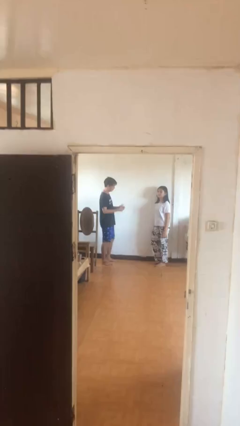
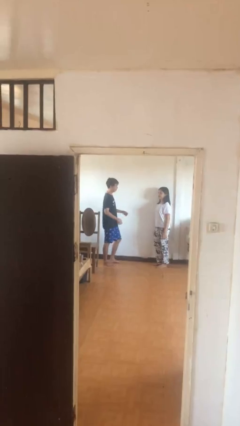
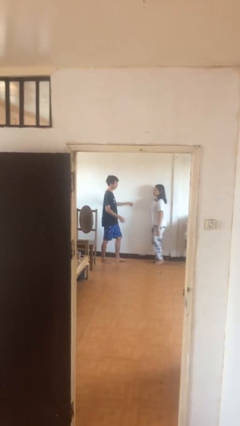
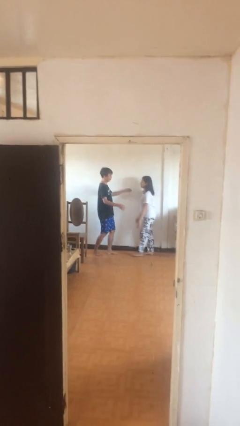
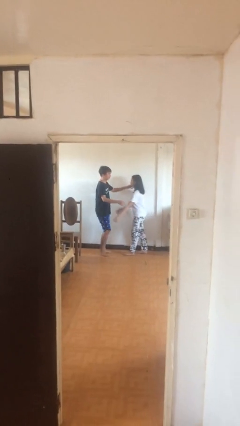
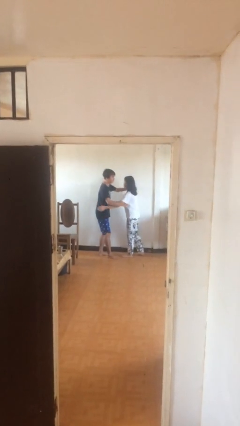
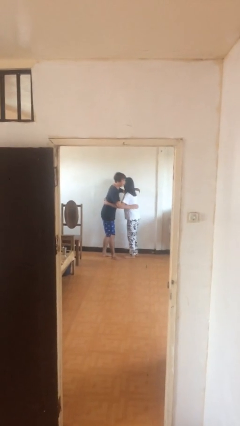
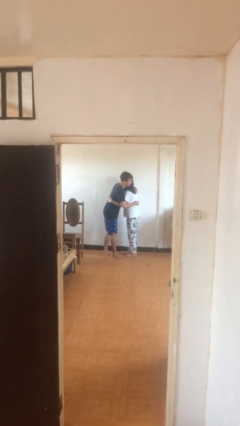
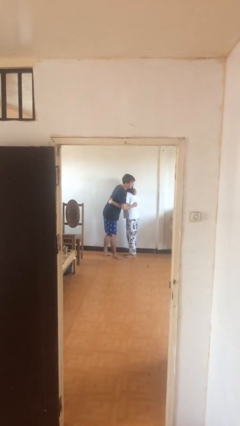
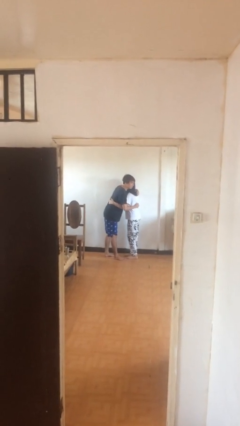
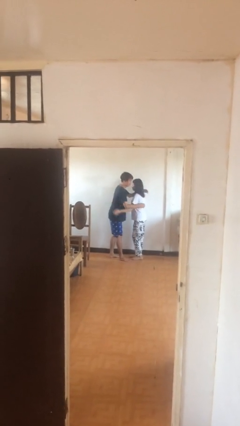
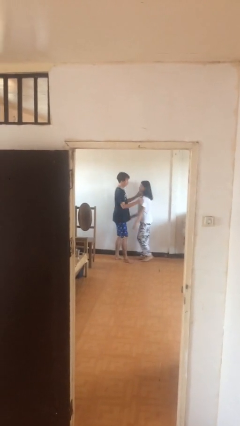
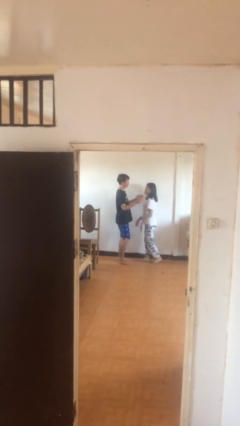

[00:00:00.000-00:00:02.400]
person embraces person

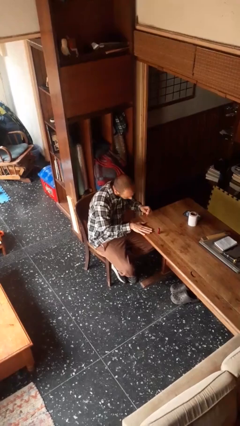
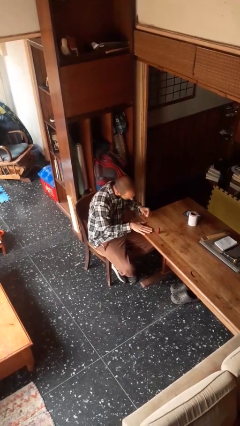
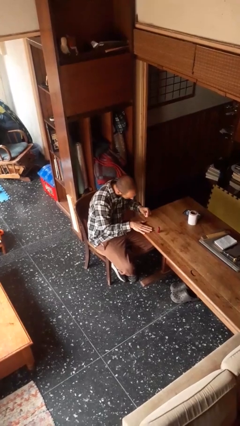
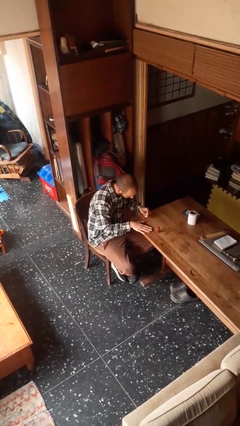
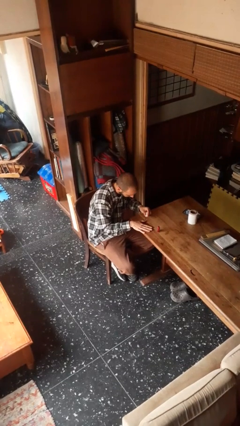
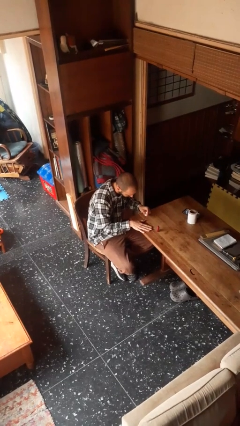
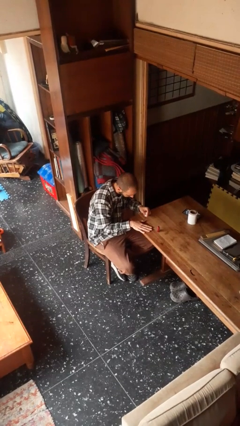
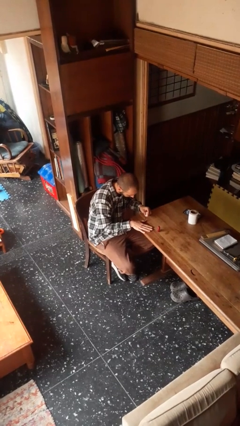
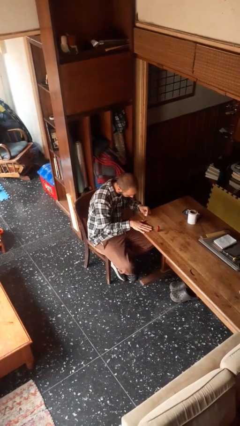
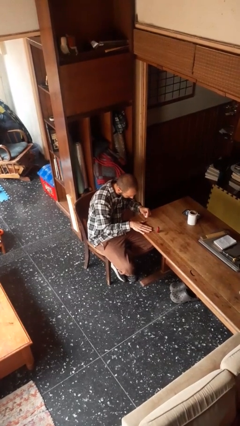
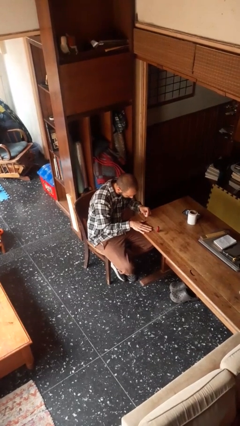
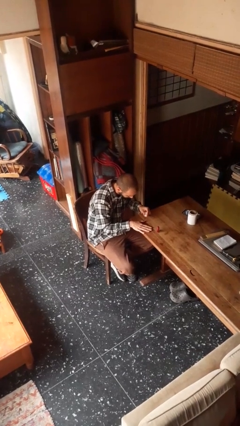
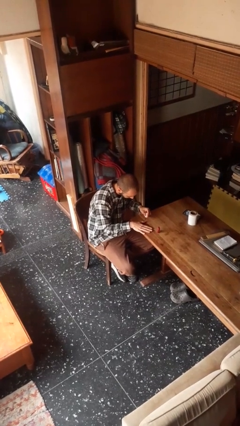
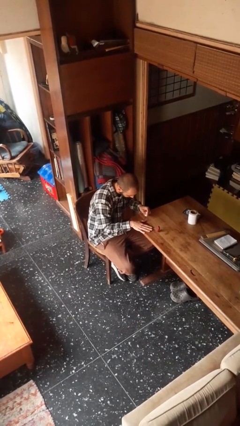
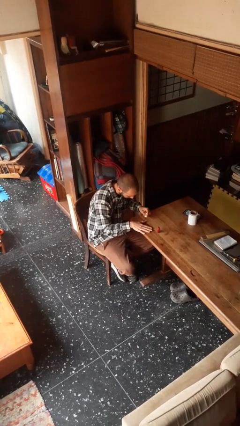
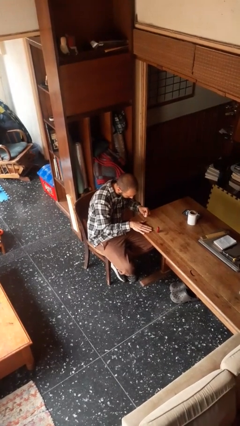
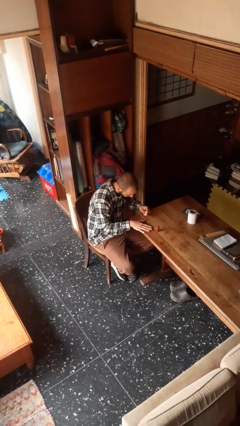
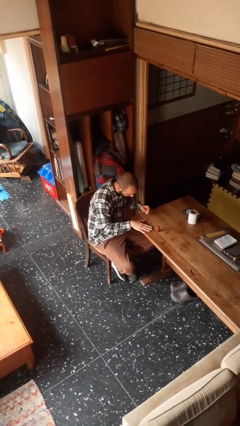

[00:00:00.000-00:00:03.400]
person paints fingernails

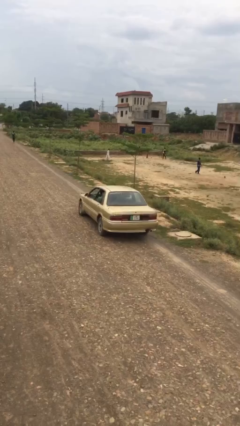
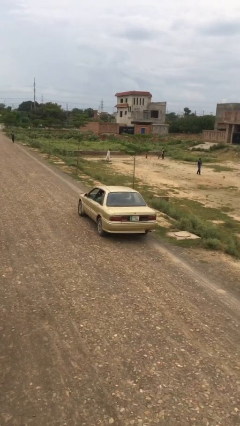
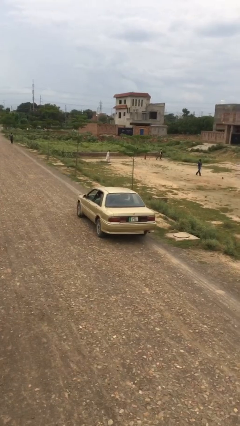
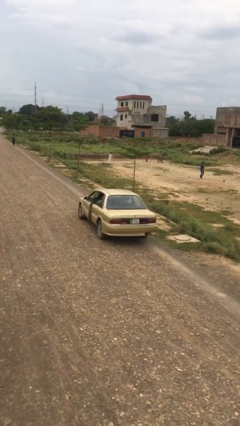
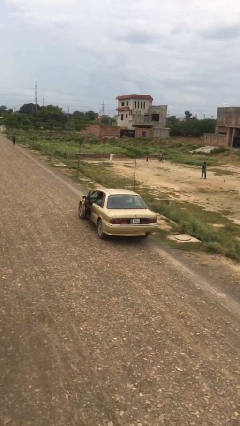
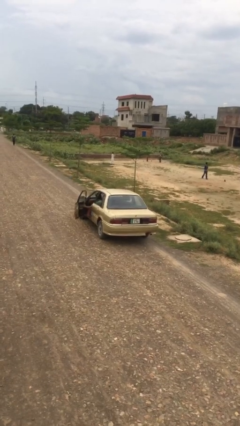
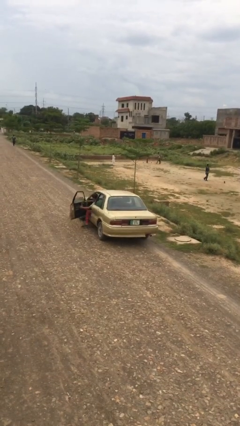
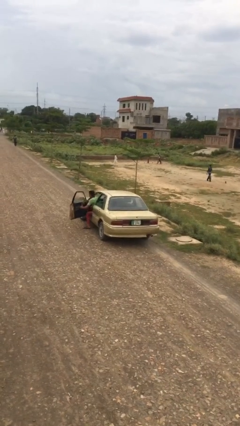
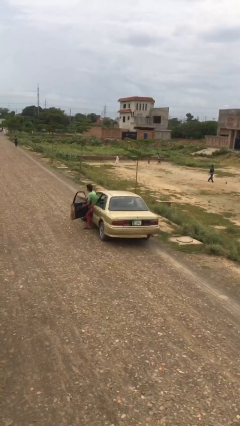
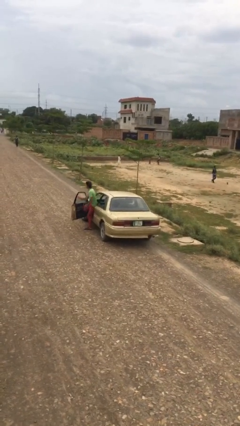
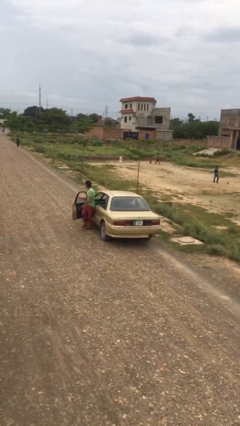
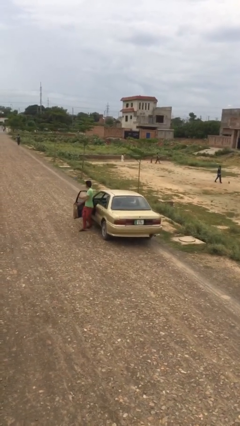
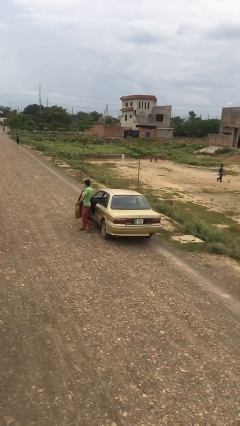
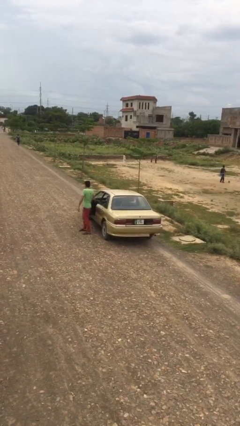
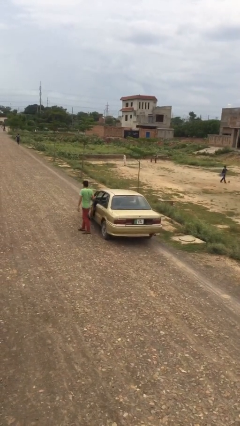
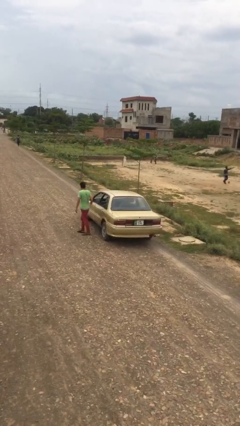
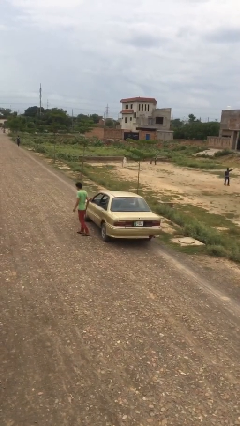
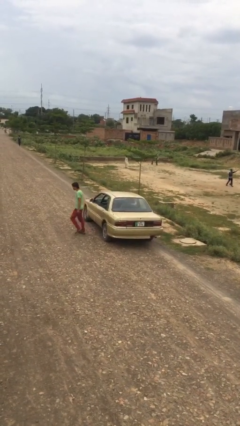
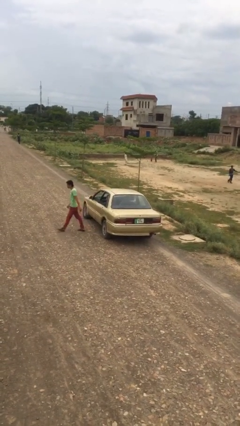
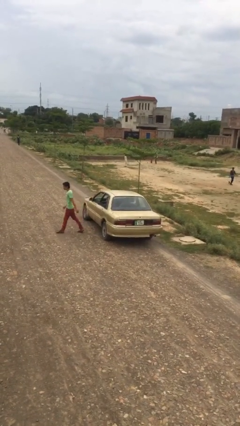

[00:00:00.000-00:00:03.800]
car drops off person

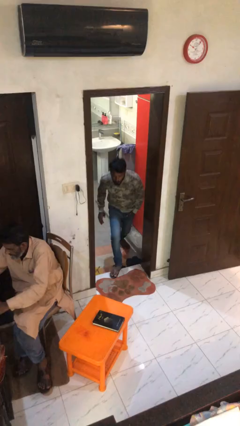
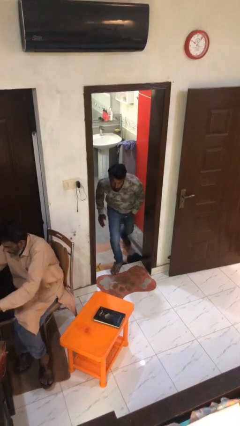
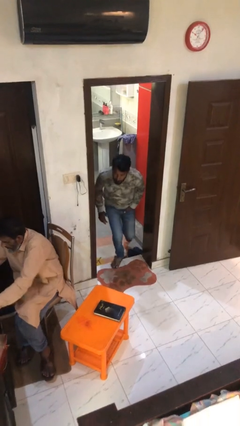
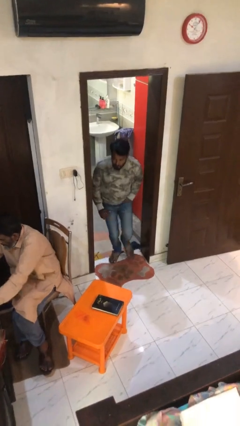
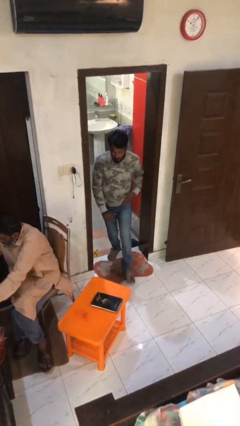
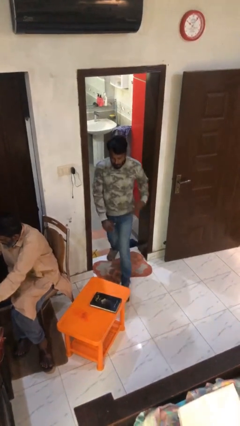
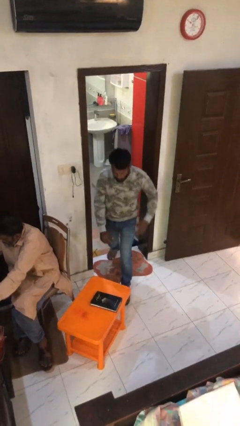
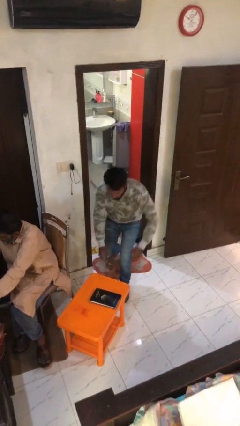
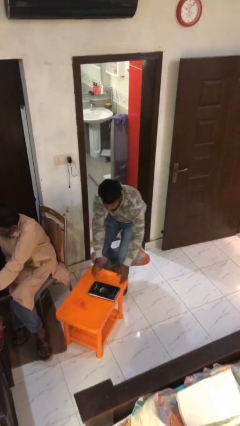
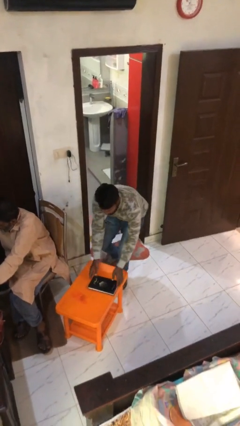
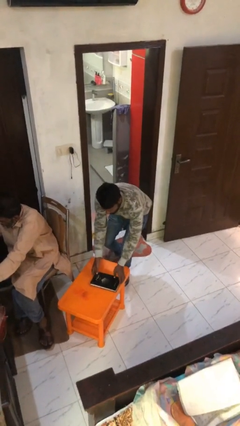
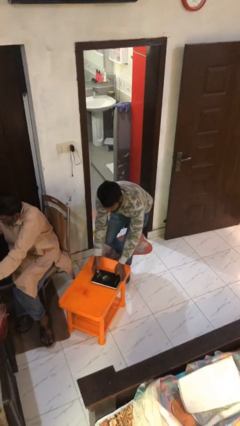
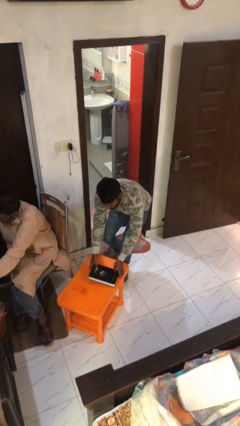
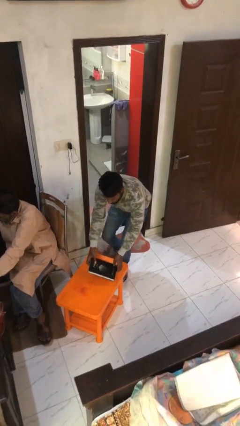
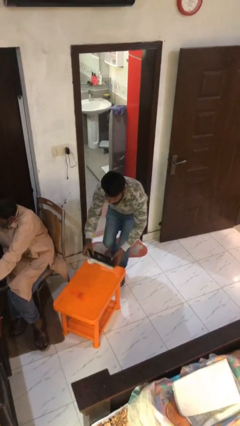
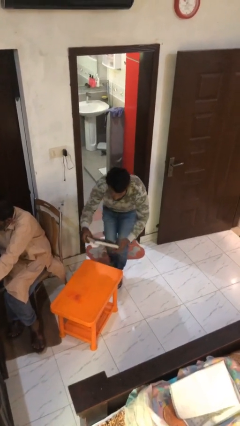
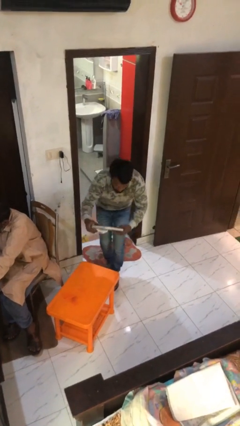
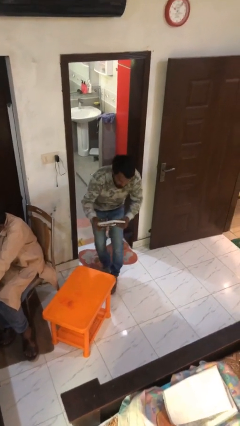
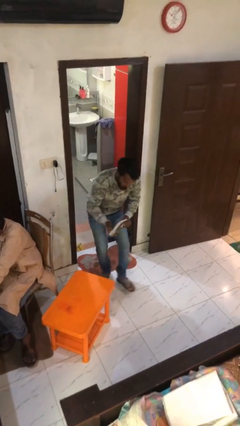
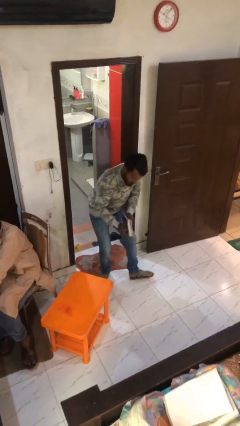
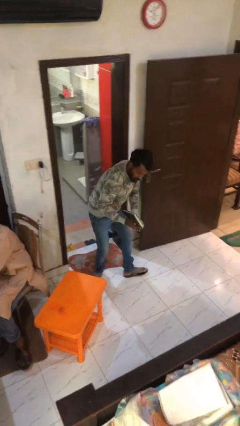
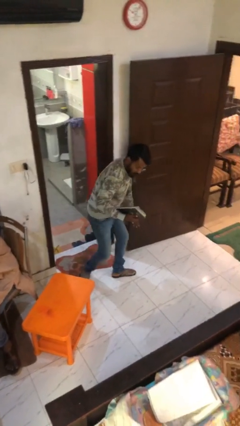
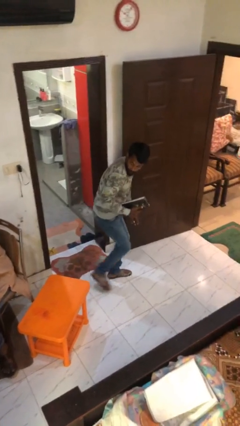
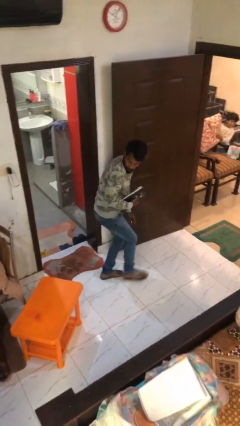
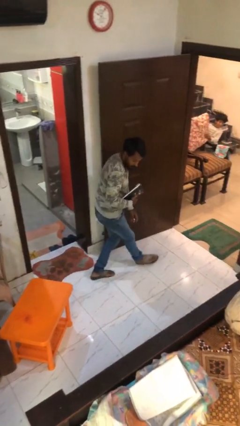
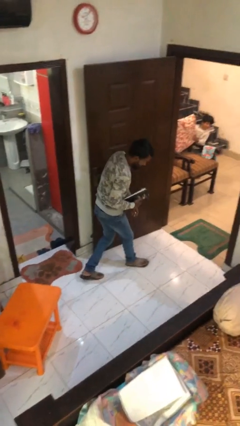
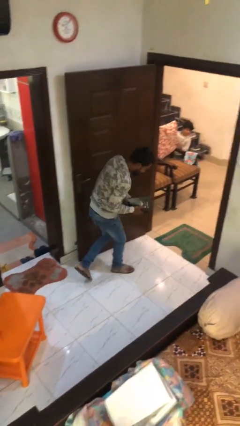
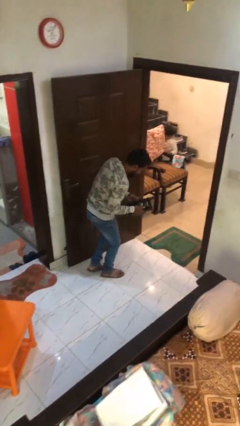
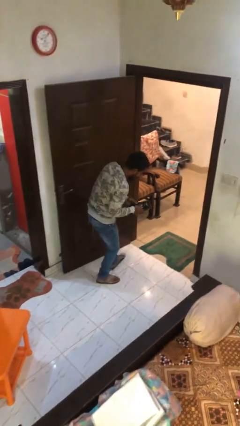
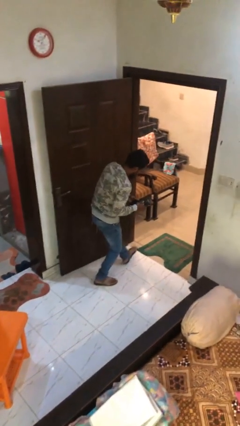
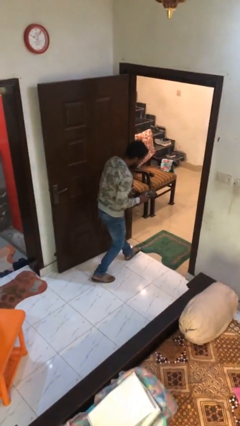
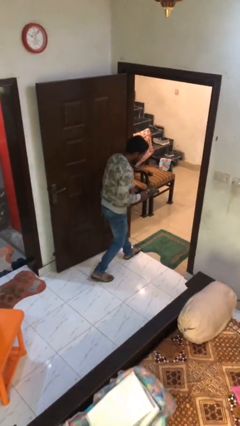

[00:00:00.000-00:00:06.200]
person steals object from person

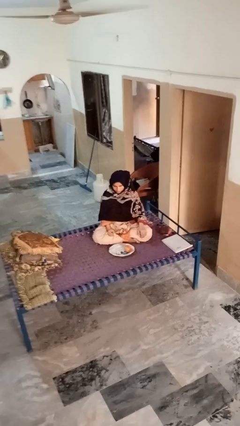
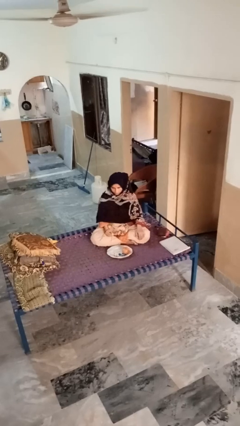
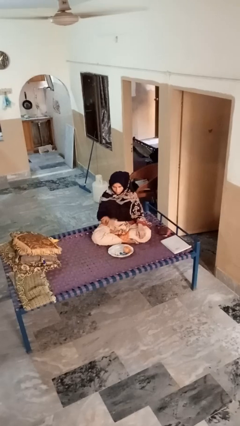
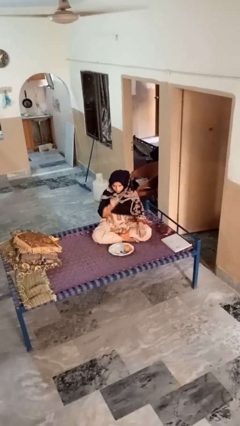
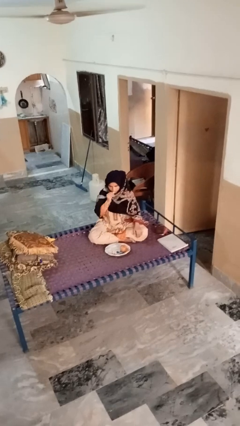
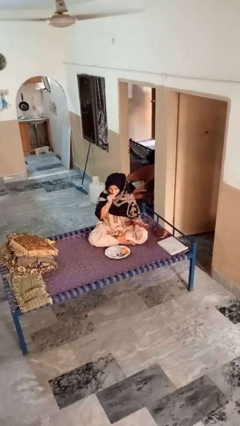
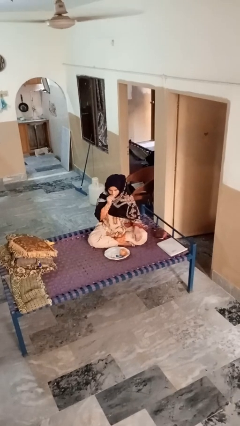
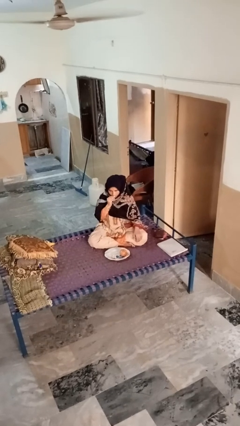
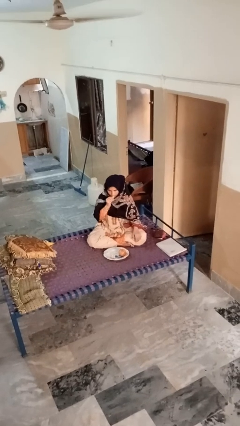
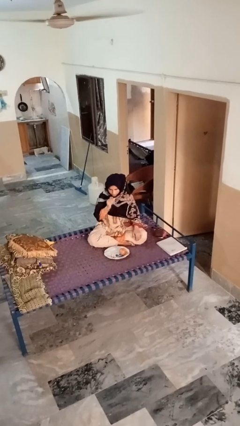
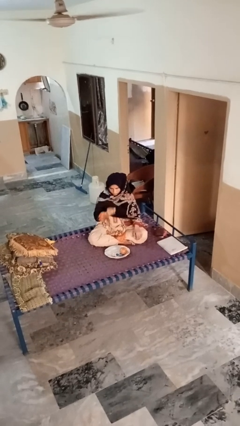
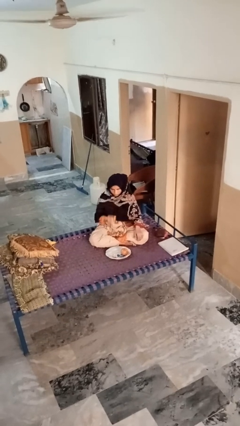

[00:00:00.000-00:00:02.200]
person eats apple
